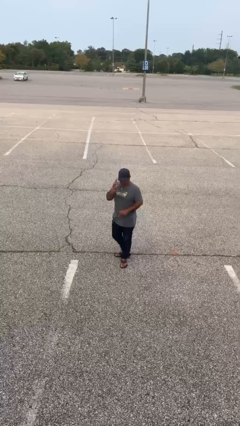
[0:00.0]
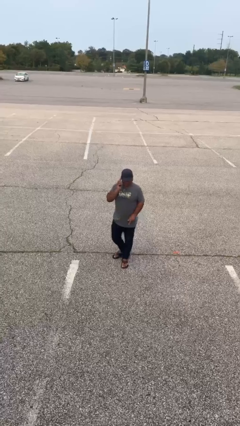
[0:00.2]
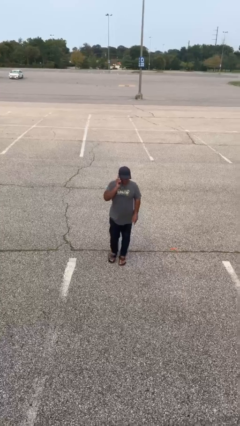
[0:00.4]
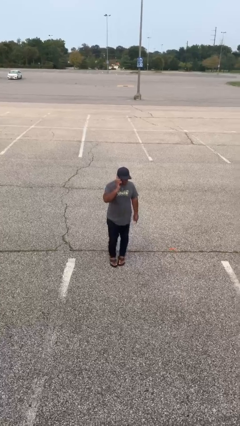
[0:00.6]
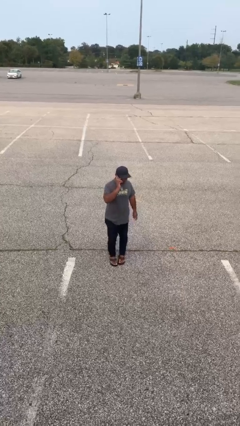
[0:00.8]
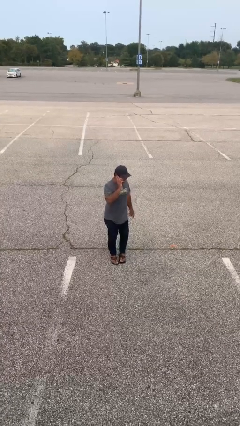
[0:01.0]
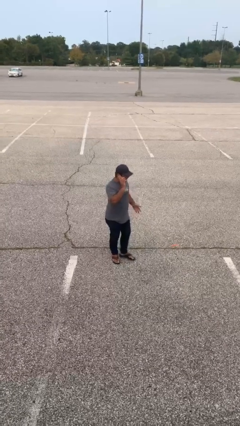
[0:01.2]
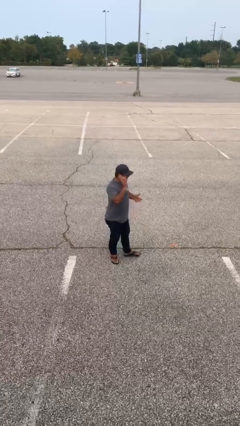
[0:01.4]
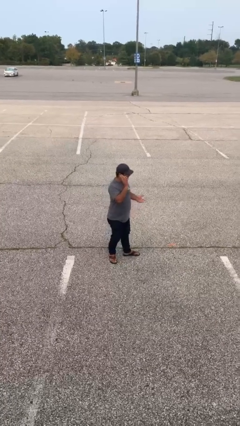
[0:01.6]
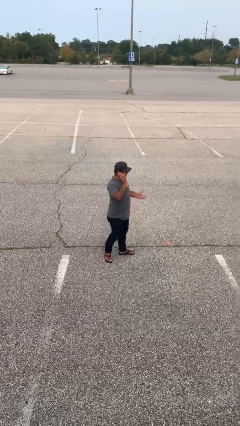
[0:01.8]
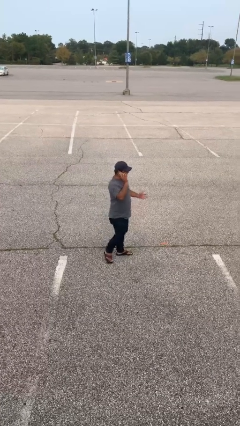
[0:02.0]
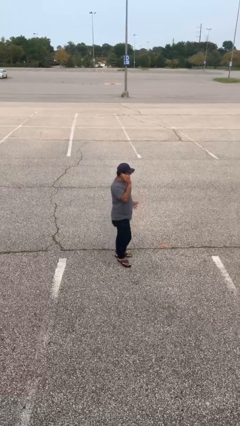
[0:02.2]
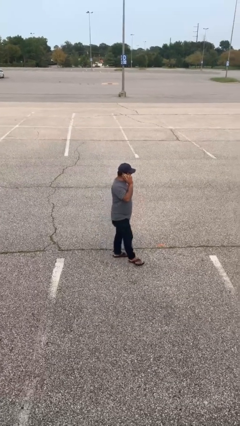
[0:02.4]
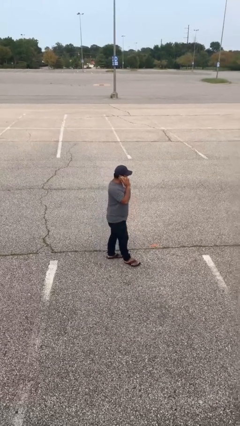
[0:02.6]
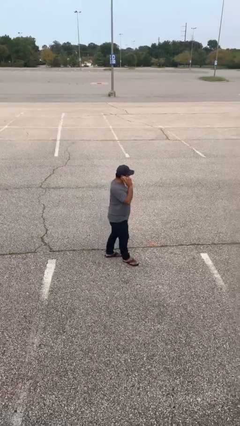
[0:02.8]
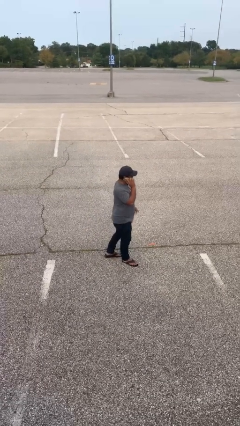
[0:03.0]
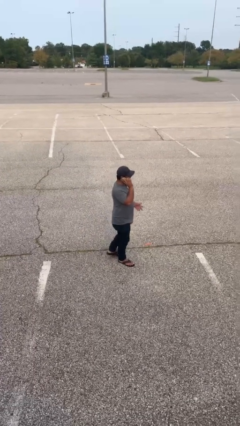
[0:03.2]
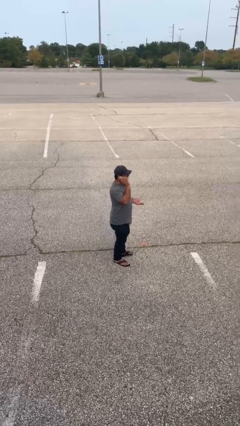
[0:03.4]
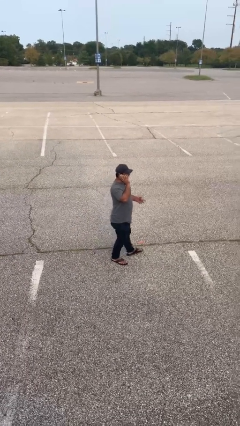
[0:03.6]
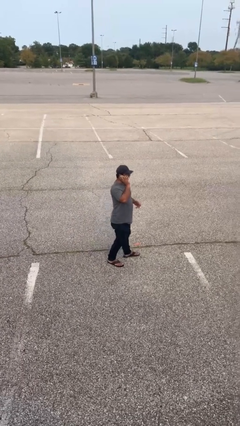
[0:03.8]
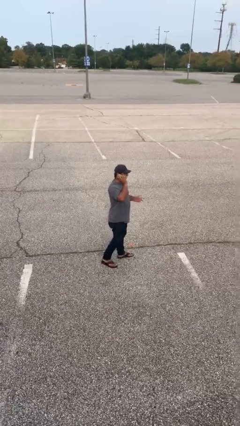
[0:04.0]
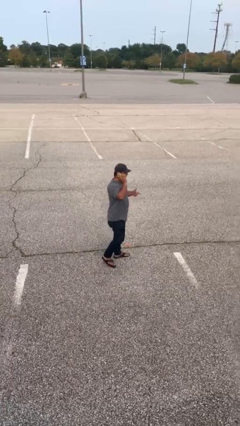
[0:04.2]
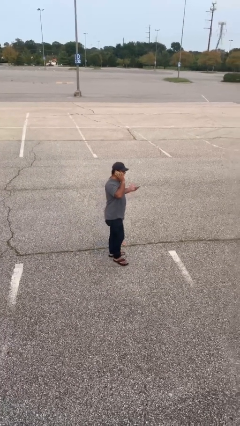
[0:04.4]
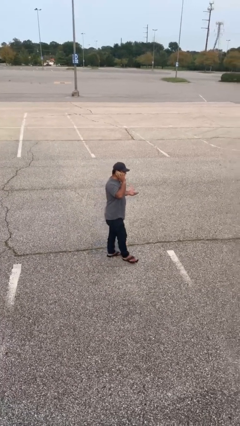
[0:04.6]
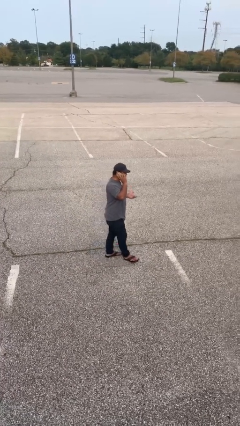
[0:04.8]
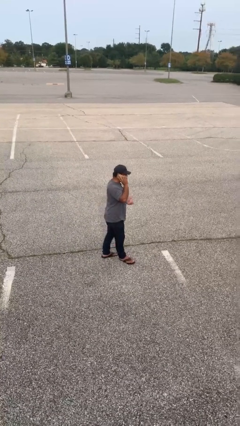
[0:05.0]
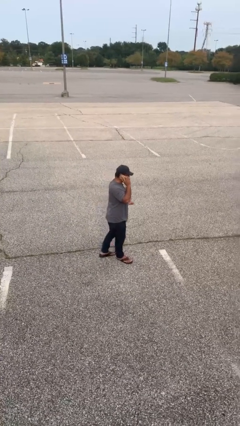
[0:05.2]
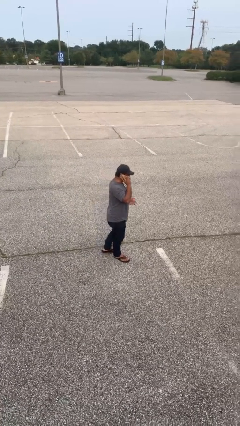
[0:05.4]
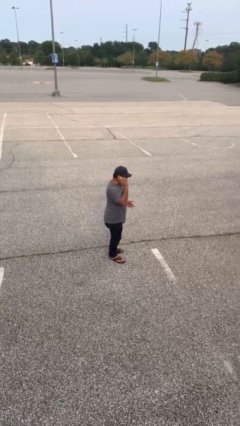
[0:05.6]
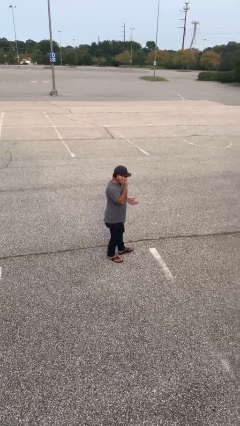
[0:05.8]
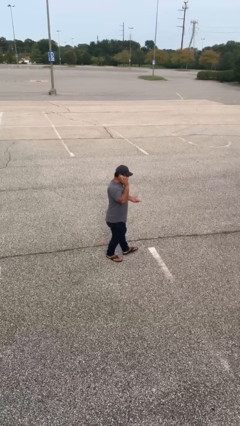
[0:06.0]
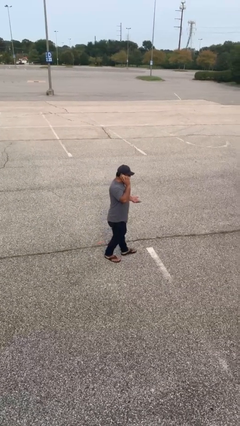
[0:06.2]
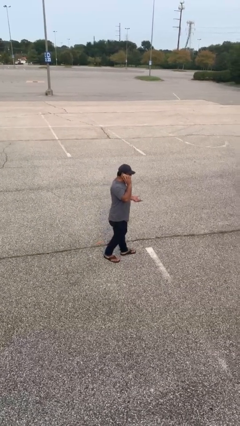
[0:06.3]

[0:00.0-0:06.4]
person talks on phone

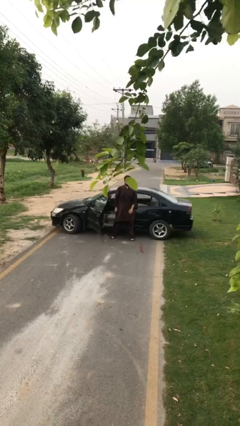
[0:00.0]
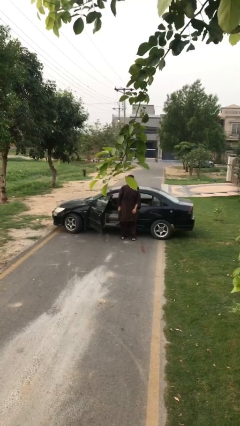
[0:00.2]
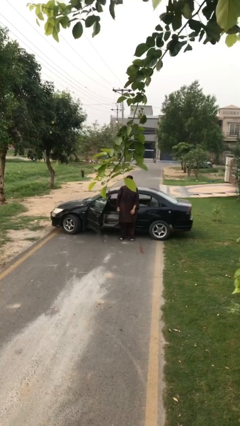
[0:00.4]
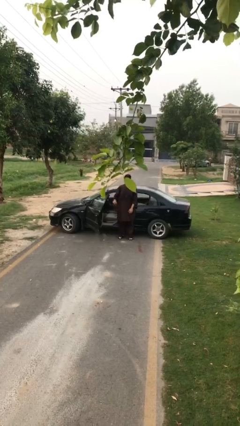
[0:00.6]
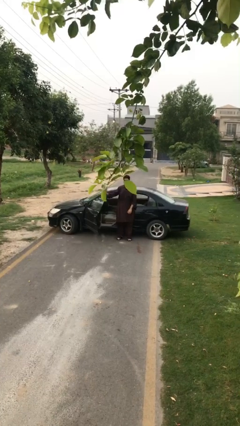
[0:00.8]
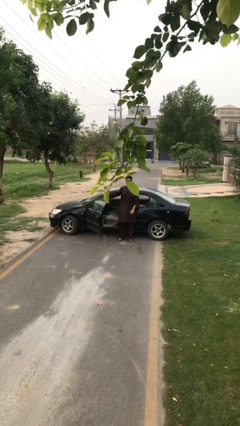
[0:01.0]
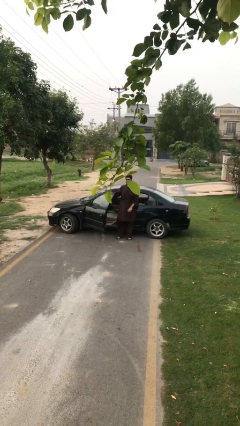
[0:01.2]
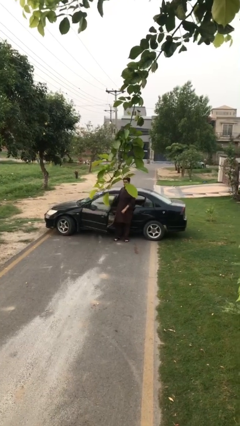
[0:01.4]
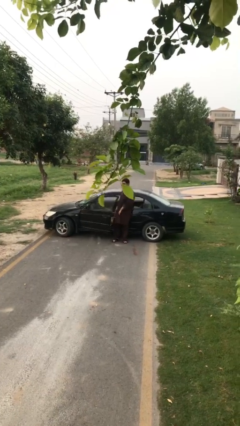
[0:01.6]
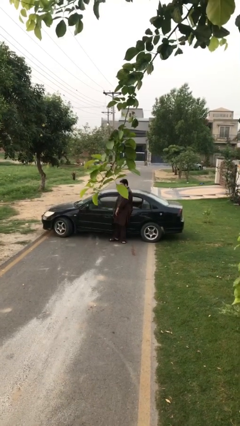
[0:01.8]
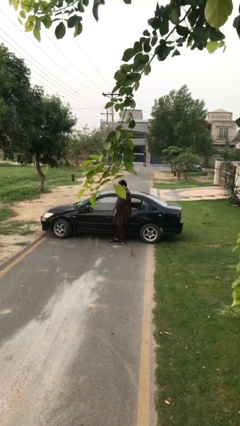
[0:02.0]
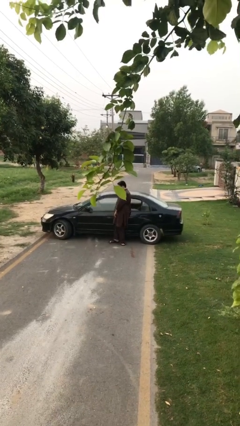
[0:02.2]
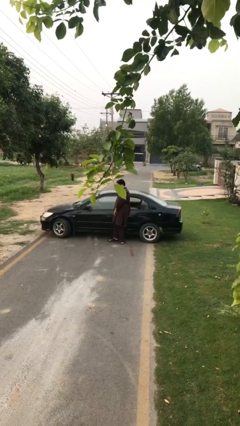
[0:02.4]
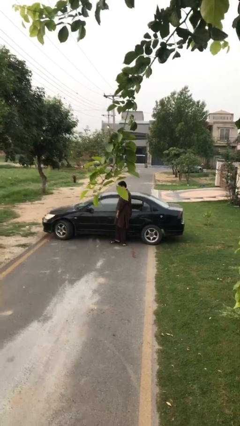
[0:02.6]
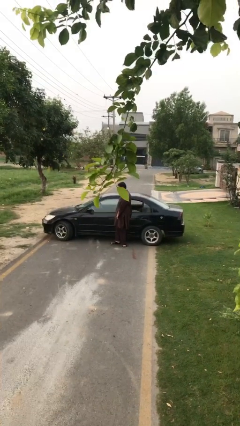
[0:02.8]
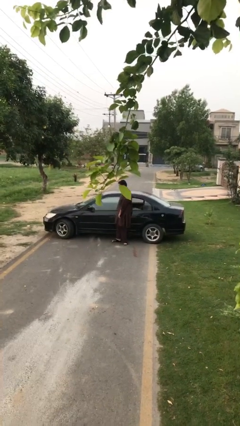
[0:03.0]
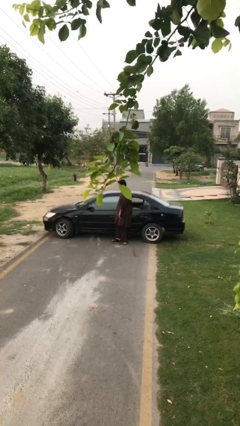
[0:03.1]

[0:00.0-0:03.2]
person closes car door

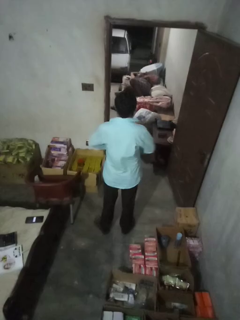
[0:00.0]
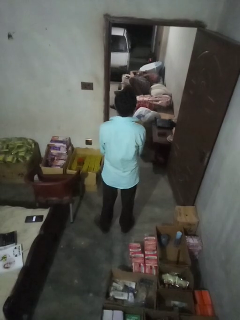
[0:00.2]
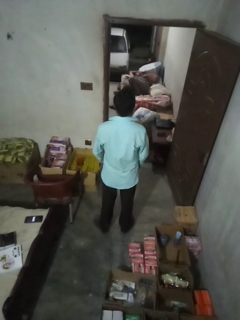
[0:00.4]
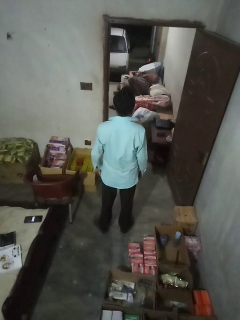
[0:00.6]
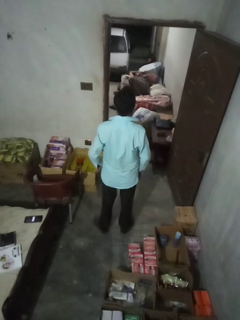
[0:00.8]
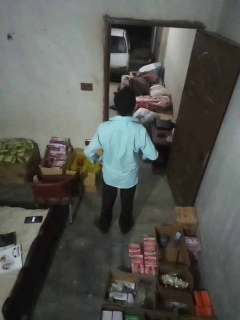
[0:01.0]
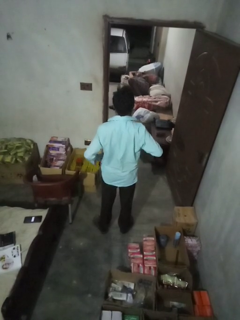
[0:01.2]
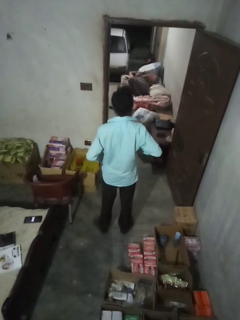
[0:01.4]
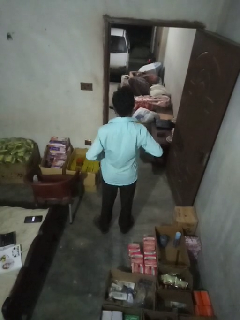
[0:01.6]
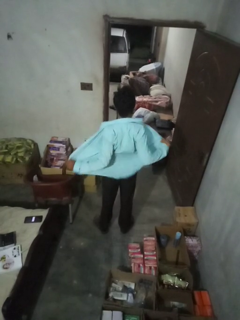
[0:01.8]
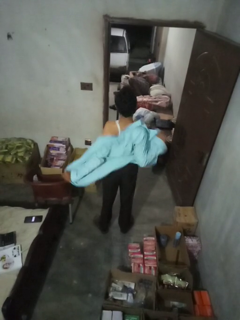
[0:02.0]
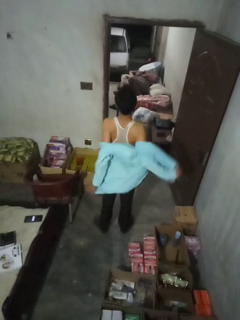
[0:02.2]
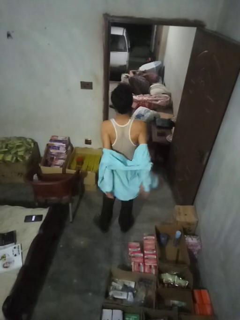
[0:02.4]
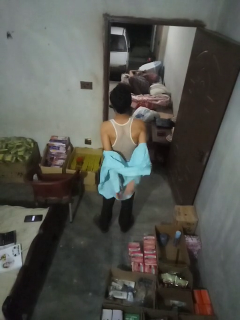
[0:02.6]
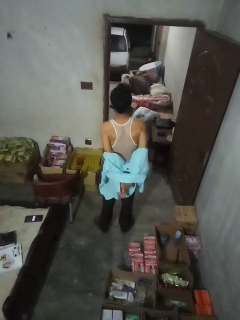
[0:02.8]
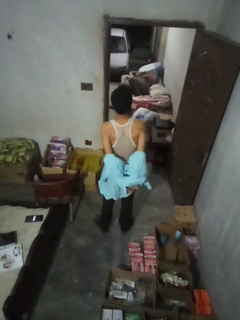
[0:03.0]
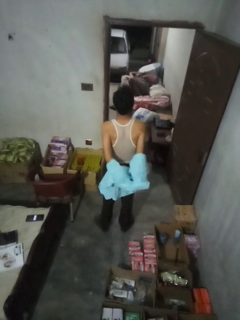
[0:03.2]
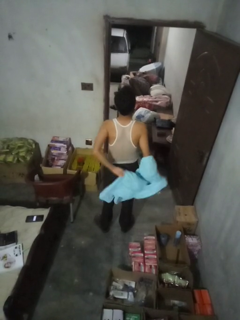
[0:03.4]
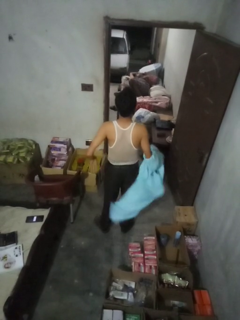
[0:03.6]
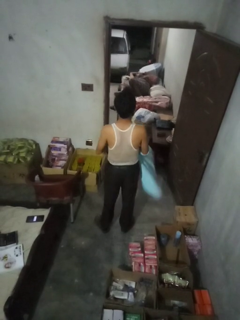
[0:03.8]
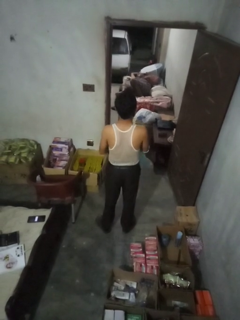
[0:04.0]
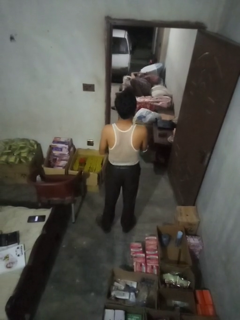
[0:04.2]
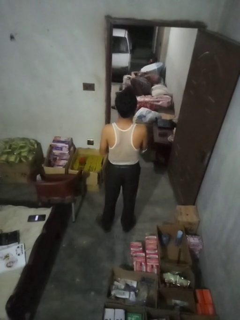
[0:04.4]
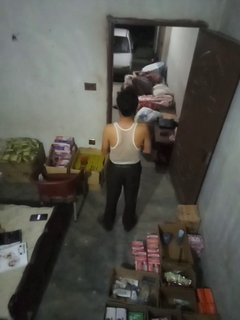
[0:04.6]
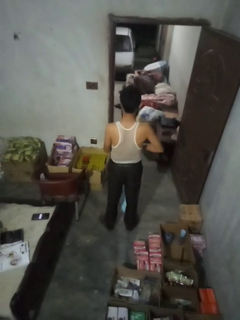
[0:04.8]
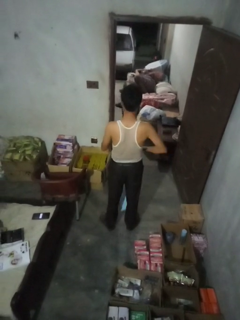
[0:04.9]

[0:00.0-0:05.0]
person takes off shirt

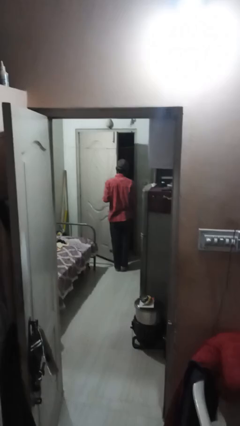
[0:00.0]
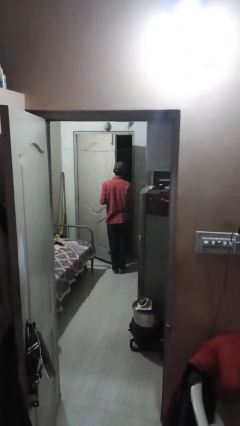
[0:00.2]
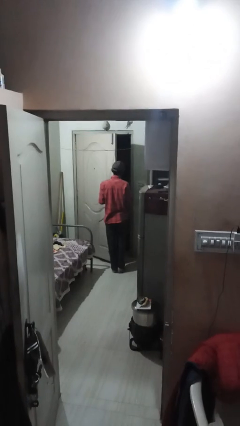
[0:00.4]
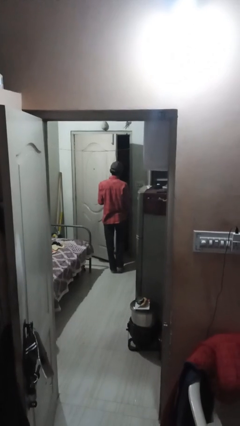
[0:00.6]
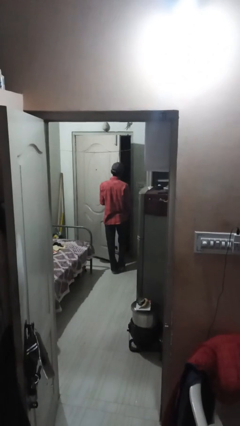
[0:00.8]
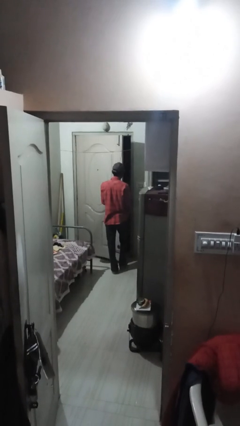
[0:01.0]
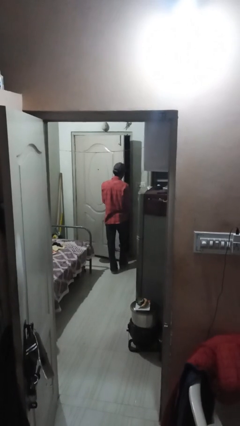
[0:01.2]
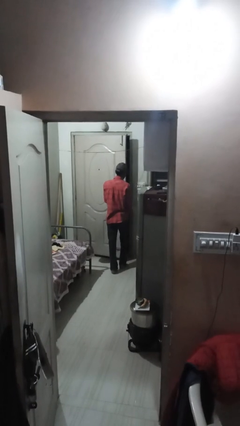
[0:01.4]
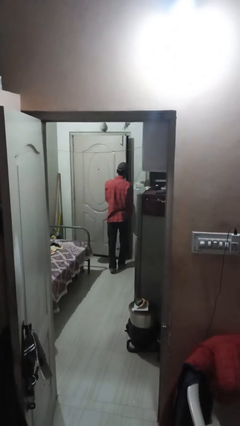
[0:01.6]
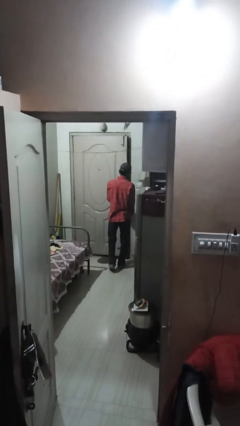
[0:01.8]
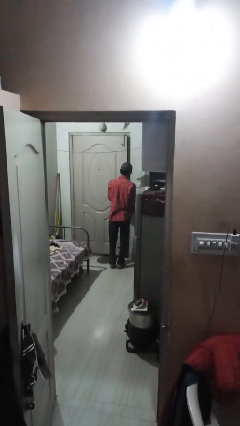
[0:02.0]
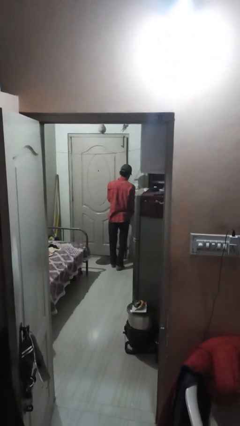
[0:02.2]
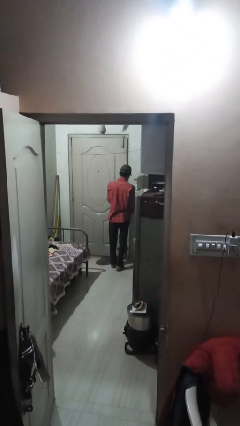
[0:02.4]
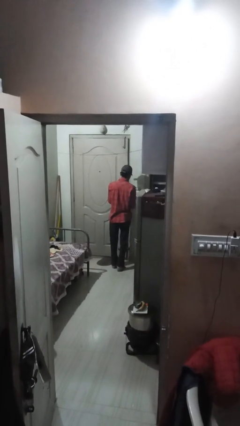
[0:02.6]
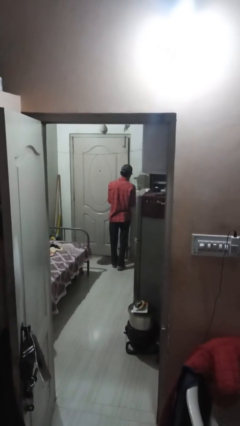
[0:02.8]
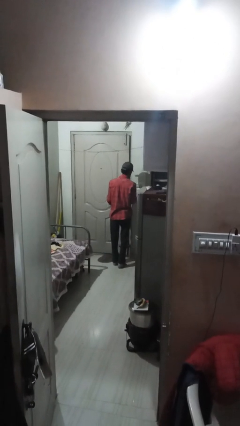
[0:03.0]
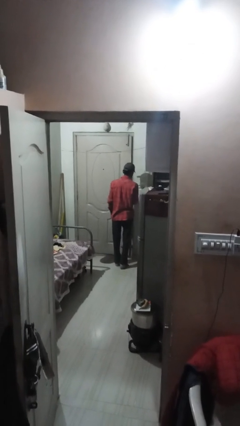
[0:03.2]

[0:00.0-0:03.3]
person closes facility door

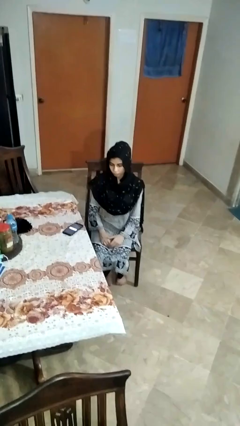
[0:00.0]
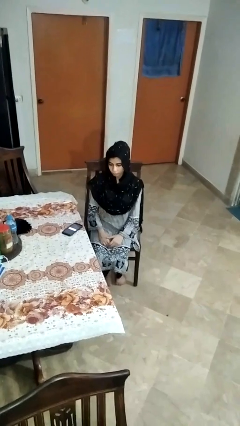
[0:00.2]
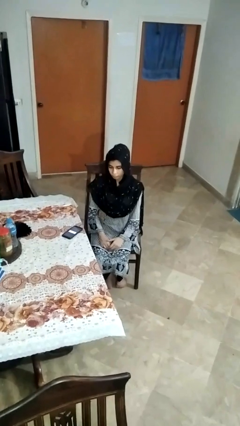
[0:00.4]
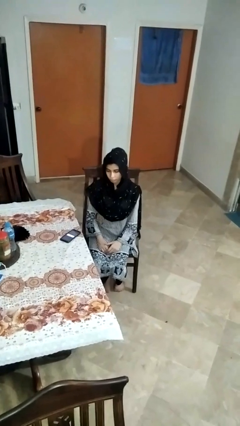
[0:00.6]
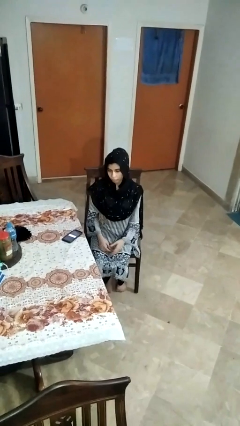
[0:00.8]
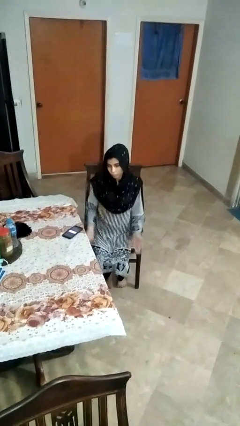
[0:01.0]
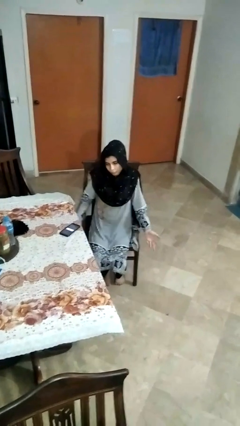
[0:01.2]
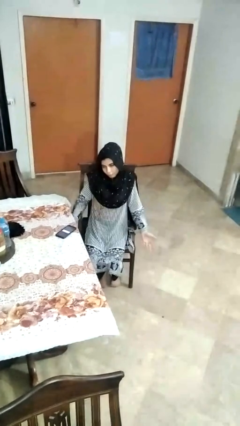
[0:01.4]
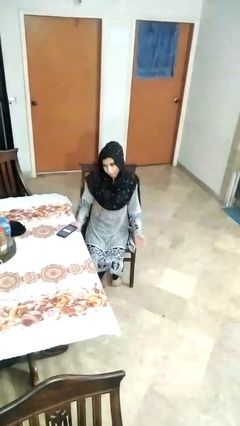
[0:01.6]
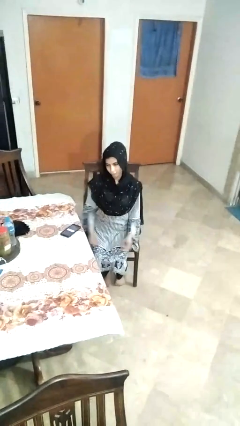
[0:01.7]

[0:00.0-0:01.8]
person shrugs
